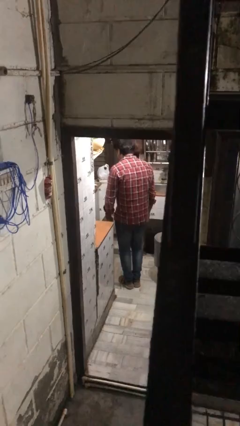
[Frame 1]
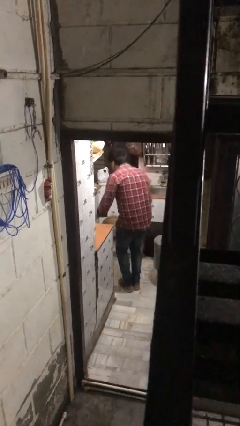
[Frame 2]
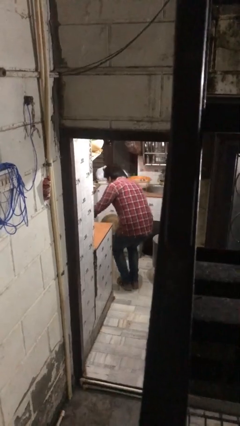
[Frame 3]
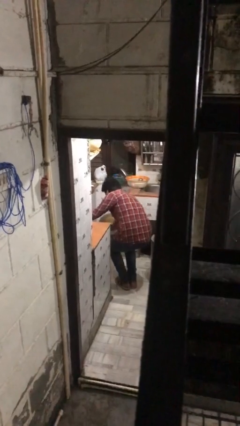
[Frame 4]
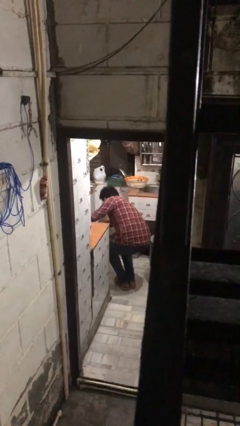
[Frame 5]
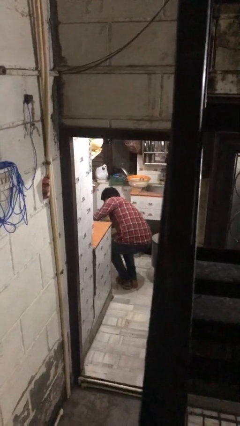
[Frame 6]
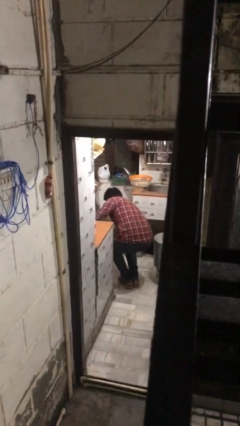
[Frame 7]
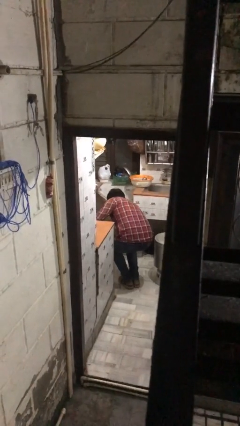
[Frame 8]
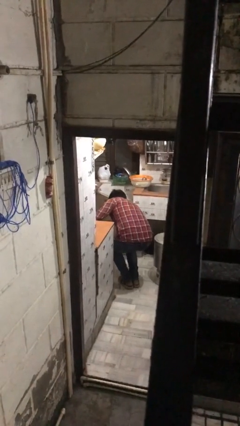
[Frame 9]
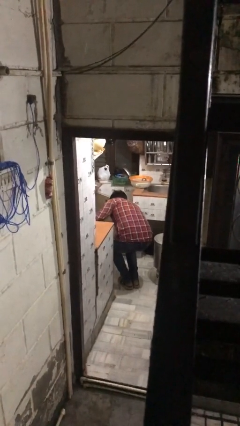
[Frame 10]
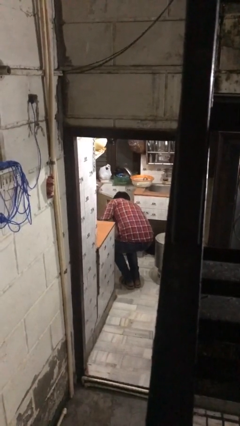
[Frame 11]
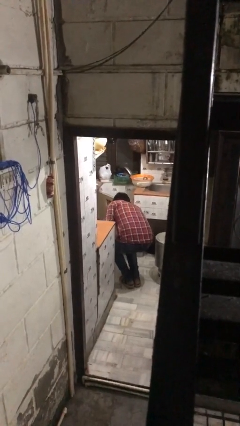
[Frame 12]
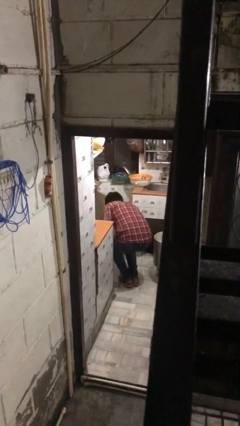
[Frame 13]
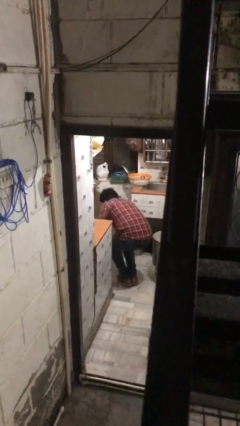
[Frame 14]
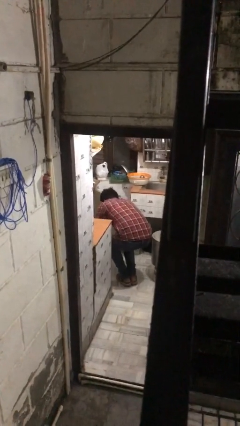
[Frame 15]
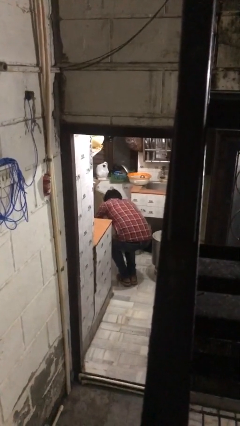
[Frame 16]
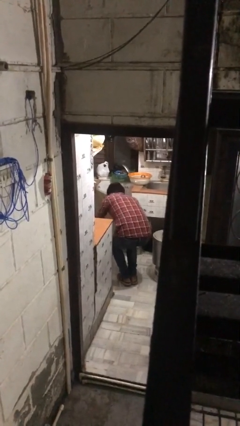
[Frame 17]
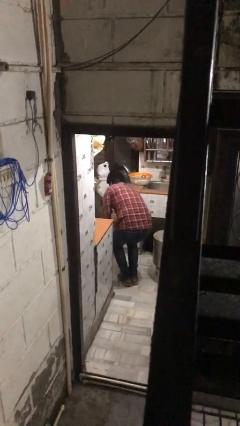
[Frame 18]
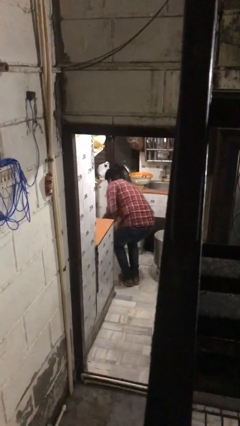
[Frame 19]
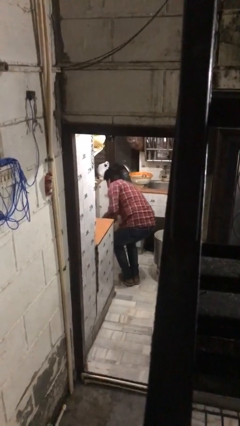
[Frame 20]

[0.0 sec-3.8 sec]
person searches in kitchen drawer

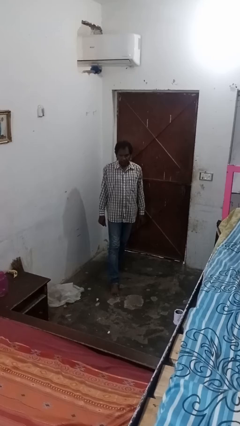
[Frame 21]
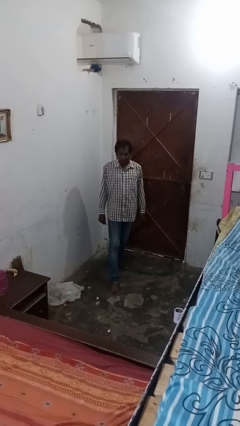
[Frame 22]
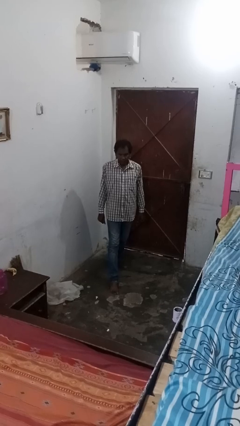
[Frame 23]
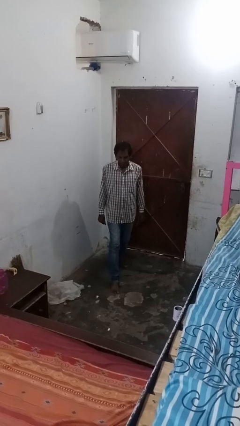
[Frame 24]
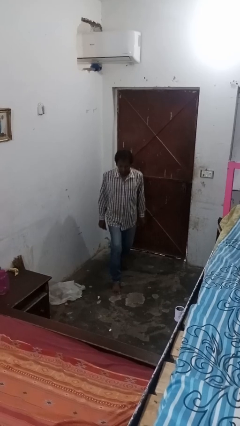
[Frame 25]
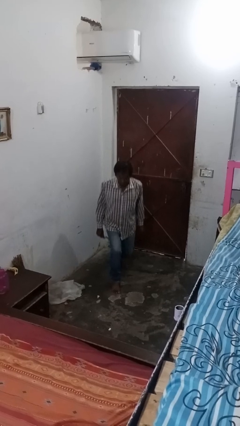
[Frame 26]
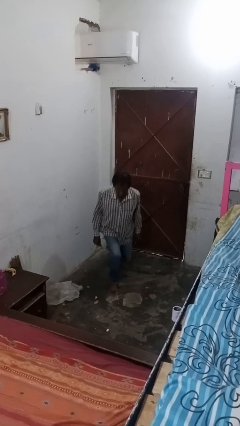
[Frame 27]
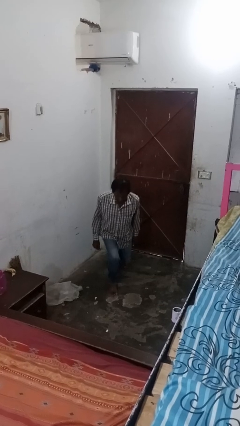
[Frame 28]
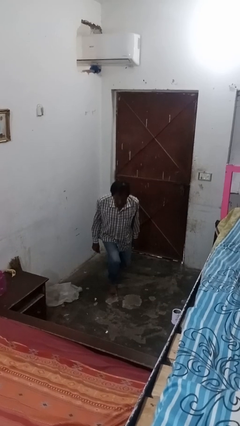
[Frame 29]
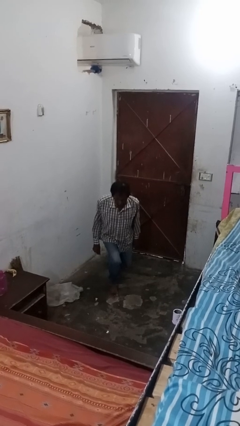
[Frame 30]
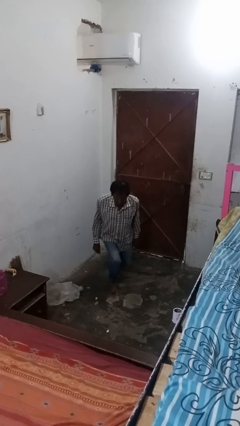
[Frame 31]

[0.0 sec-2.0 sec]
person exercises with lunges

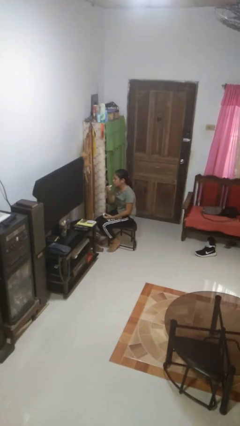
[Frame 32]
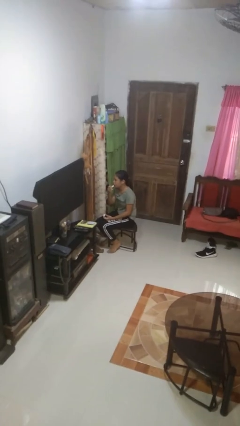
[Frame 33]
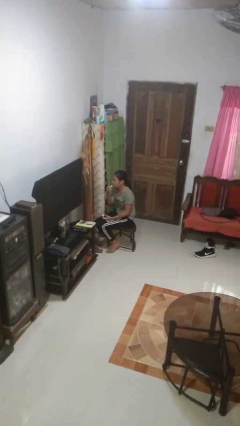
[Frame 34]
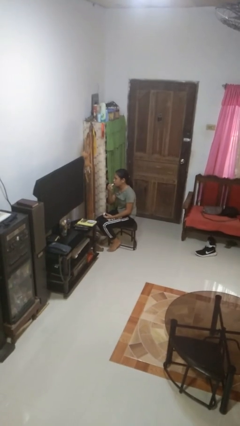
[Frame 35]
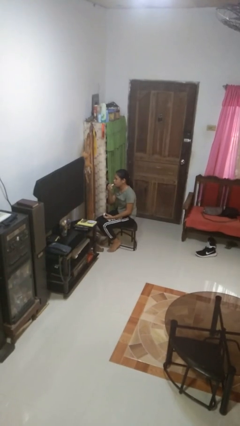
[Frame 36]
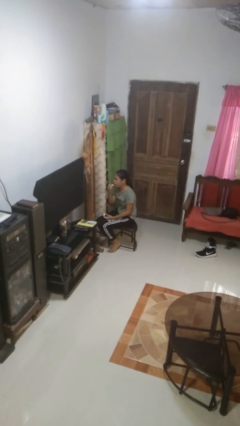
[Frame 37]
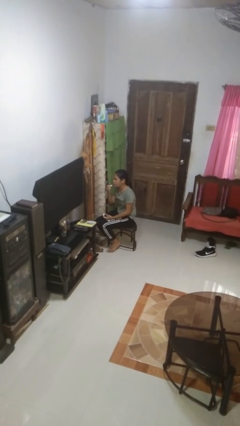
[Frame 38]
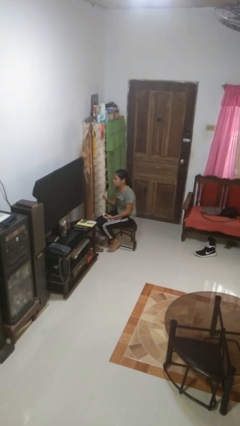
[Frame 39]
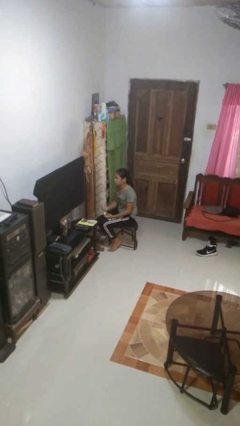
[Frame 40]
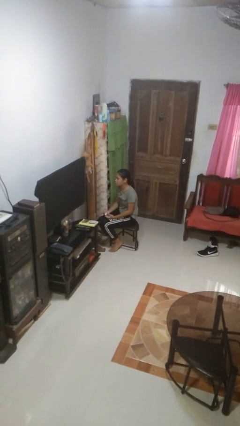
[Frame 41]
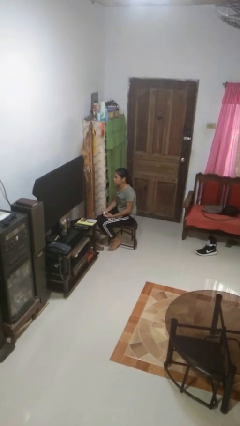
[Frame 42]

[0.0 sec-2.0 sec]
person applies lip makeup

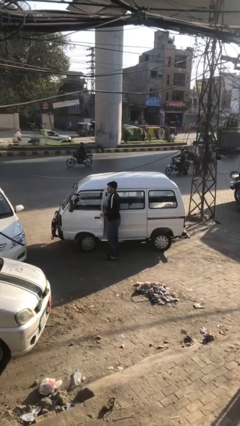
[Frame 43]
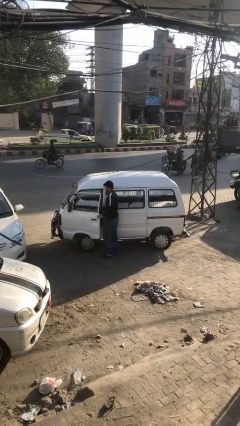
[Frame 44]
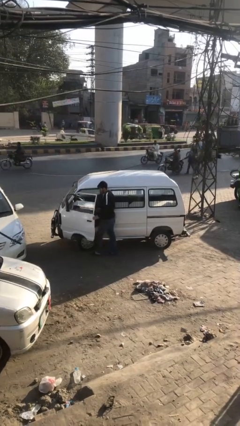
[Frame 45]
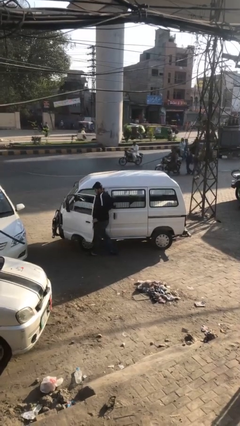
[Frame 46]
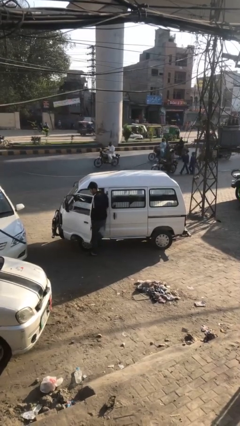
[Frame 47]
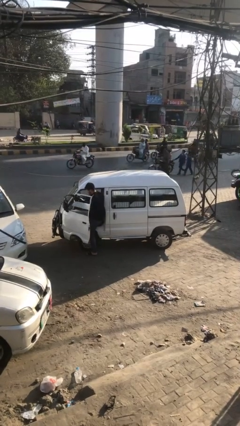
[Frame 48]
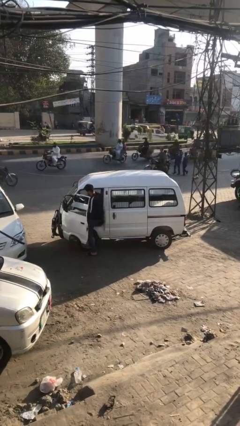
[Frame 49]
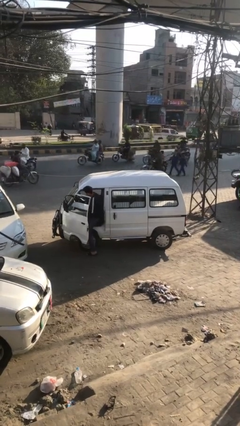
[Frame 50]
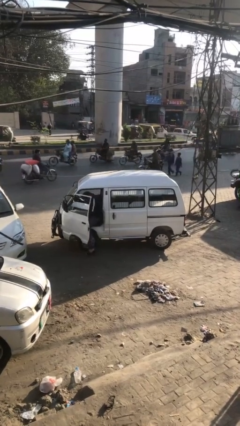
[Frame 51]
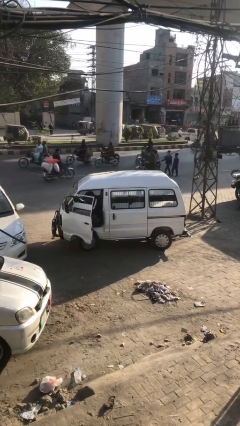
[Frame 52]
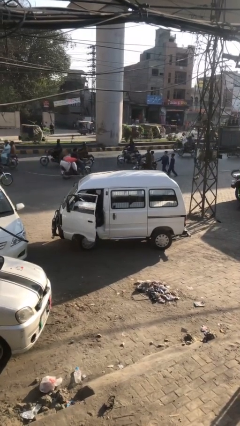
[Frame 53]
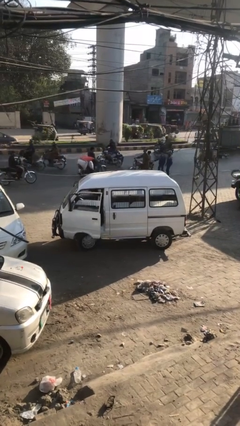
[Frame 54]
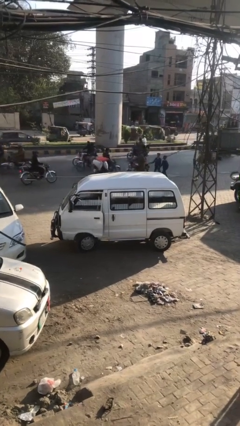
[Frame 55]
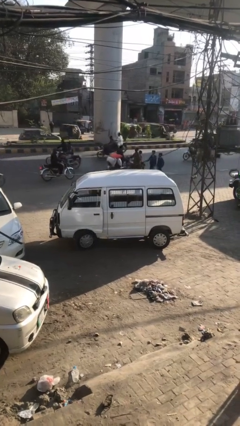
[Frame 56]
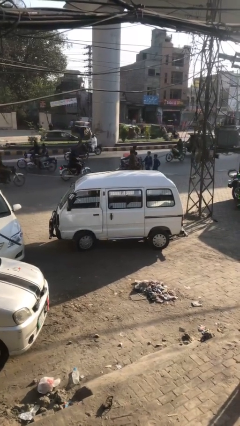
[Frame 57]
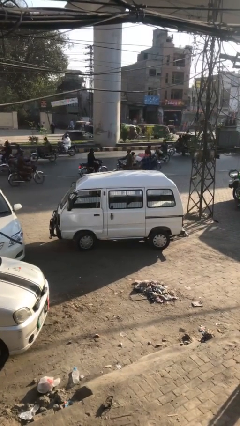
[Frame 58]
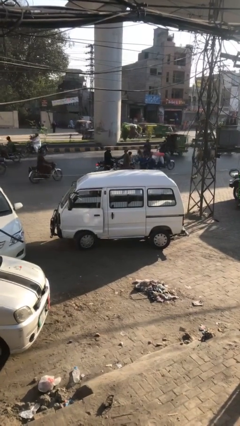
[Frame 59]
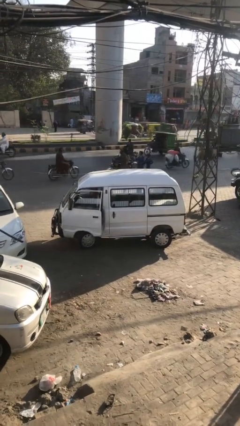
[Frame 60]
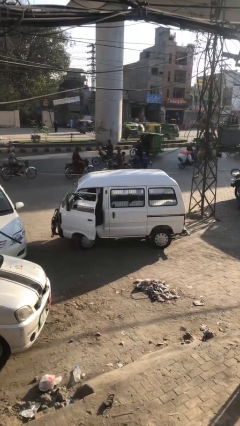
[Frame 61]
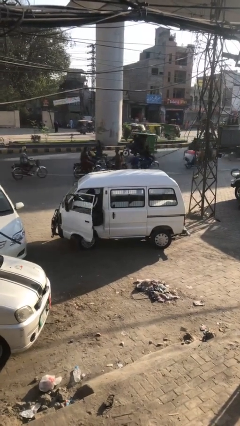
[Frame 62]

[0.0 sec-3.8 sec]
car picks up person

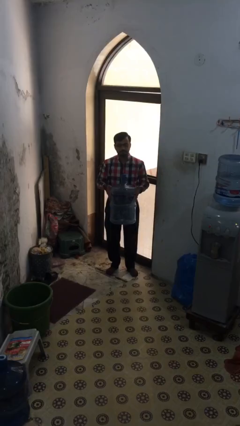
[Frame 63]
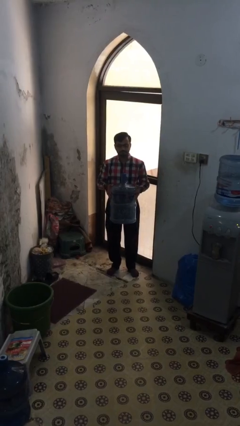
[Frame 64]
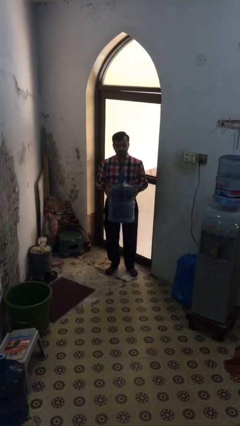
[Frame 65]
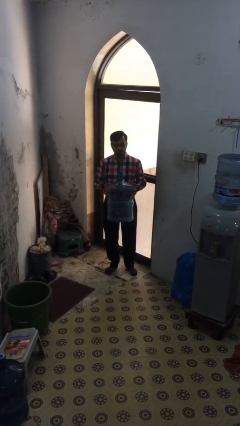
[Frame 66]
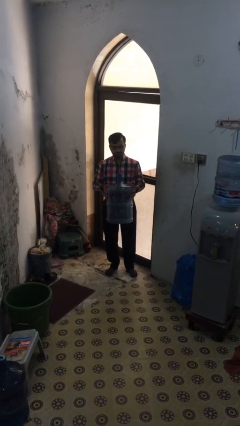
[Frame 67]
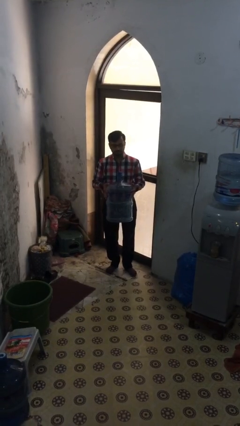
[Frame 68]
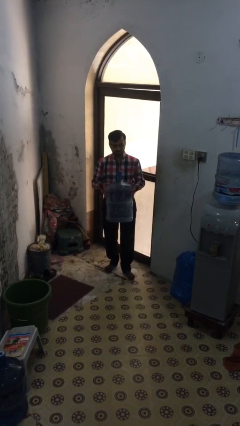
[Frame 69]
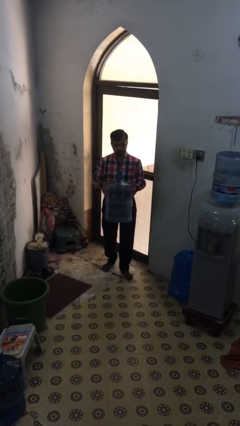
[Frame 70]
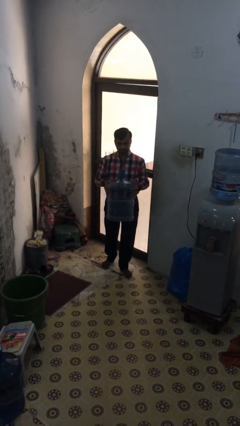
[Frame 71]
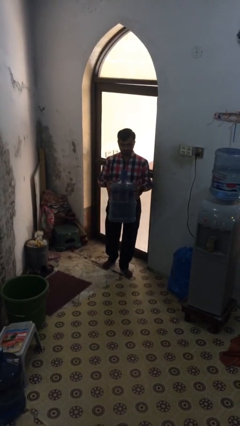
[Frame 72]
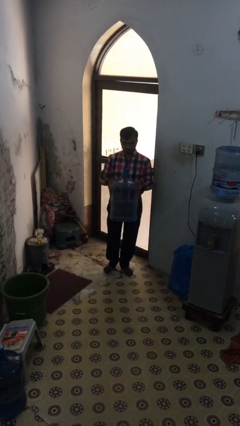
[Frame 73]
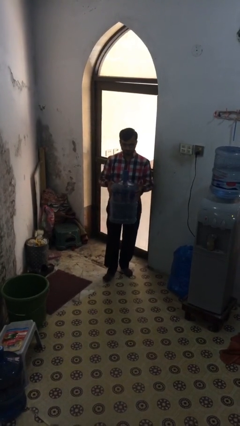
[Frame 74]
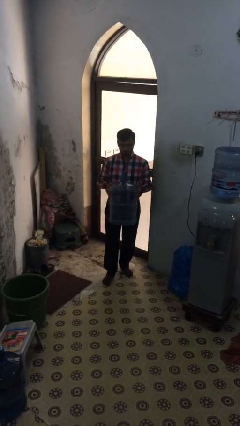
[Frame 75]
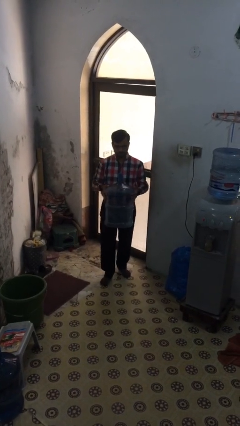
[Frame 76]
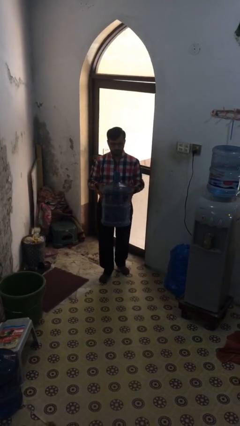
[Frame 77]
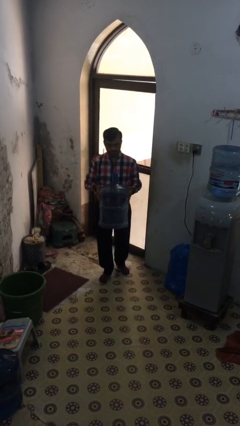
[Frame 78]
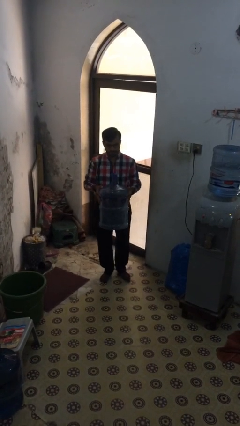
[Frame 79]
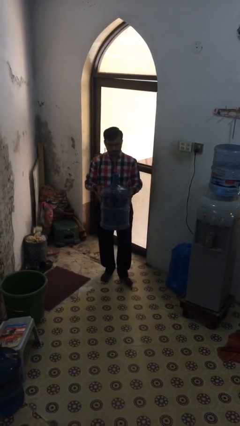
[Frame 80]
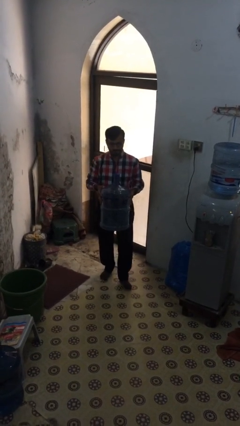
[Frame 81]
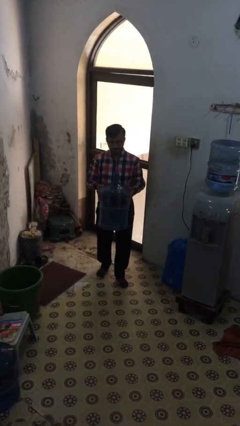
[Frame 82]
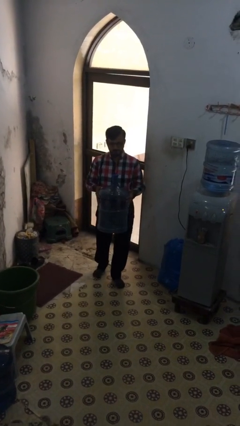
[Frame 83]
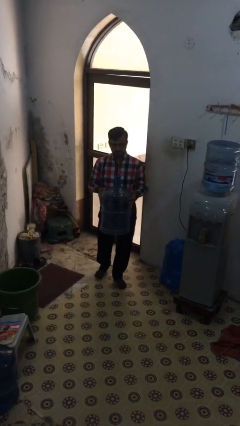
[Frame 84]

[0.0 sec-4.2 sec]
person carries heavy object

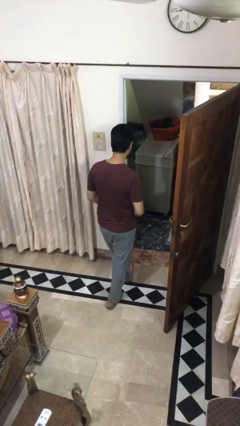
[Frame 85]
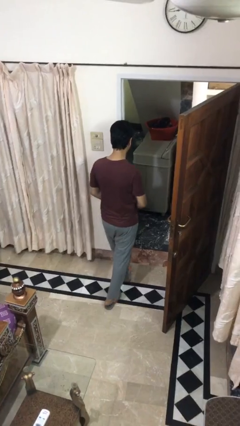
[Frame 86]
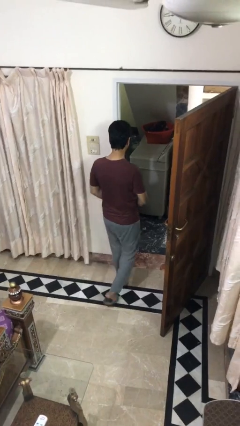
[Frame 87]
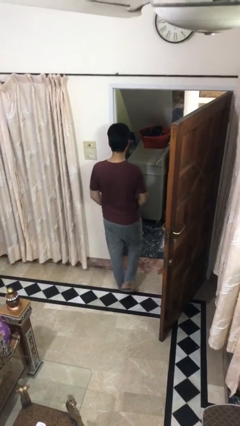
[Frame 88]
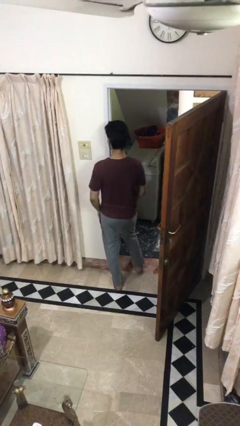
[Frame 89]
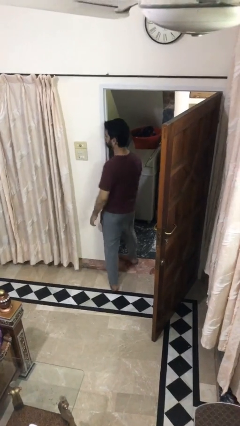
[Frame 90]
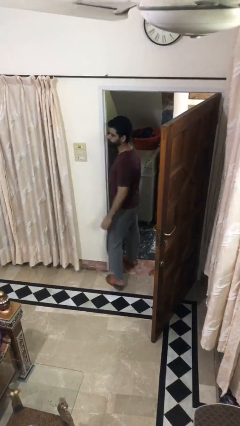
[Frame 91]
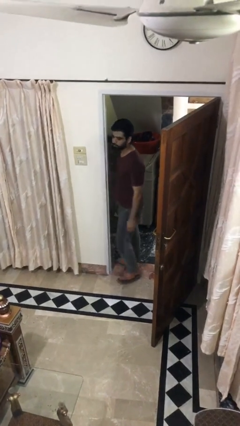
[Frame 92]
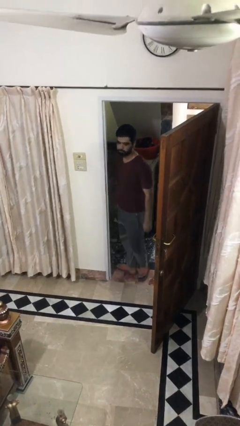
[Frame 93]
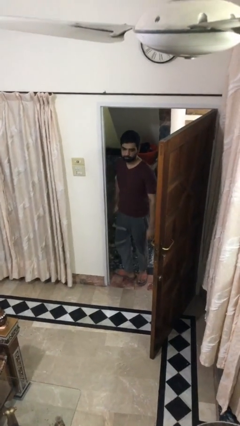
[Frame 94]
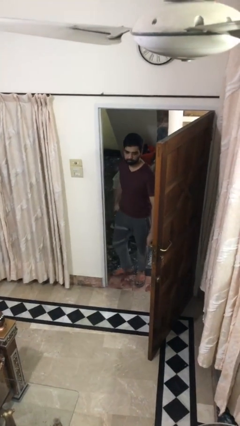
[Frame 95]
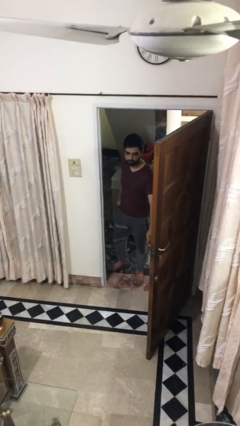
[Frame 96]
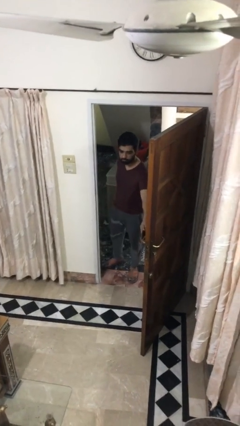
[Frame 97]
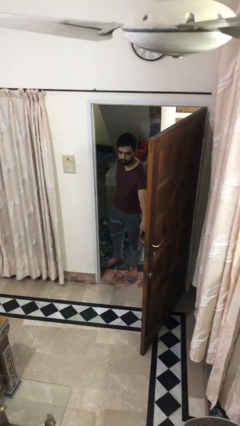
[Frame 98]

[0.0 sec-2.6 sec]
person exits scene through structure
